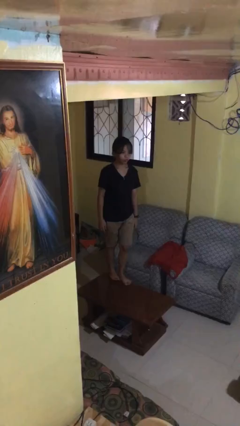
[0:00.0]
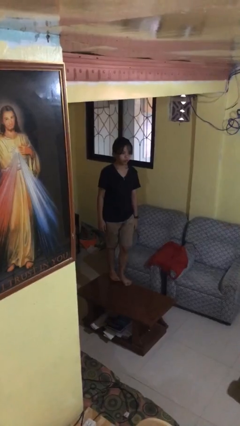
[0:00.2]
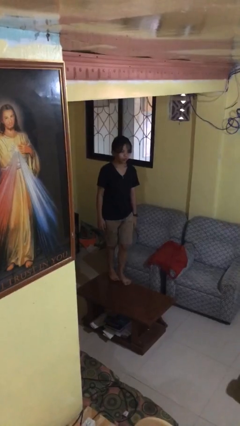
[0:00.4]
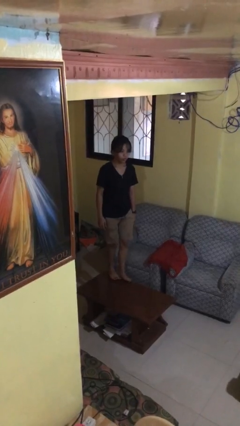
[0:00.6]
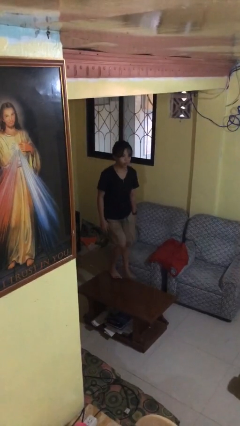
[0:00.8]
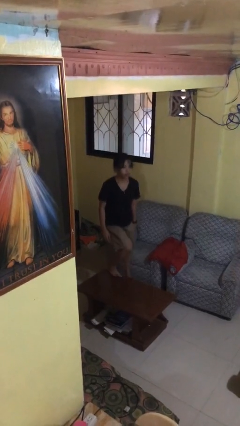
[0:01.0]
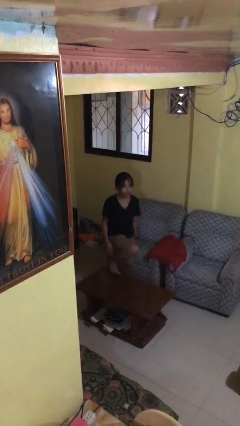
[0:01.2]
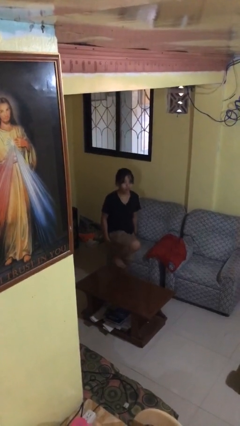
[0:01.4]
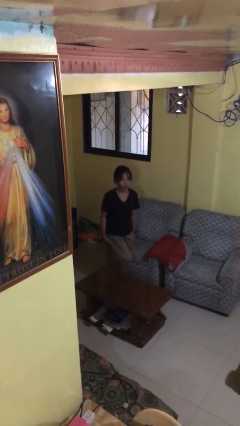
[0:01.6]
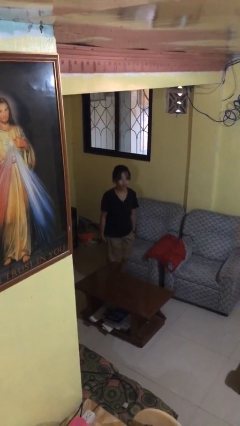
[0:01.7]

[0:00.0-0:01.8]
person climbs off table

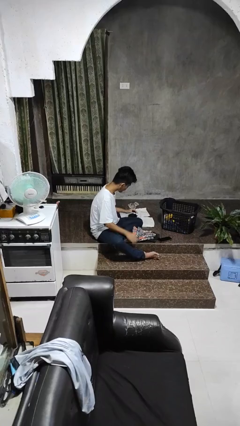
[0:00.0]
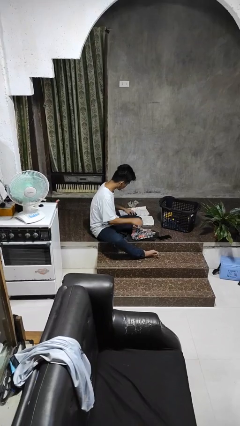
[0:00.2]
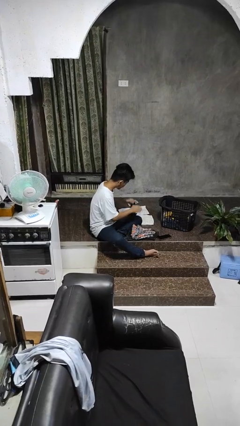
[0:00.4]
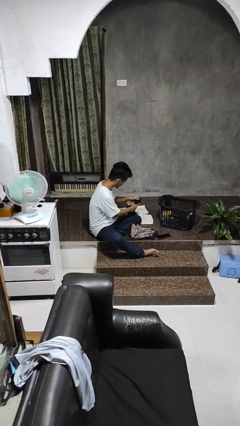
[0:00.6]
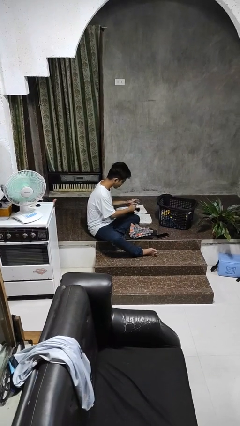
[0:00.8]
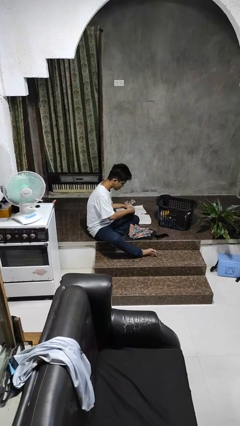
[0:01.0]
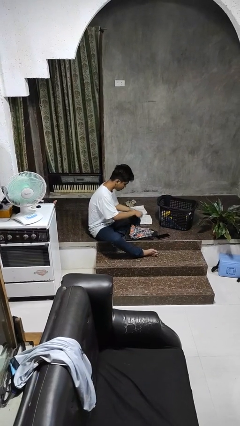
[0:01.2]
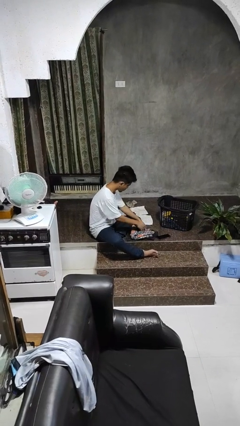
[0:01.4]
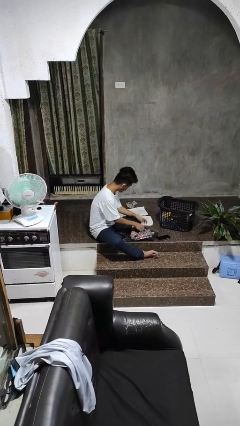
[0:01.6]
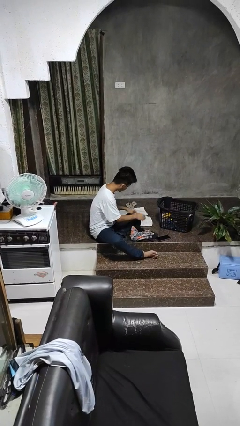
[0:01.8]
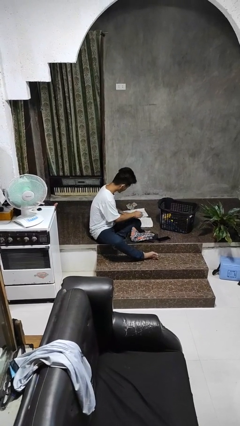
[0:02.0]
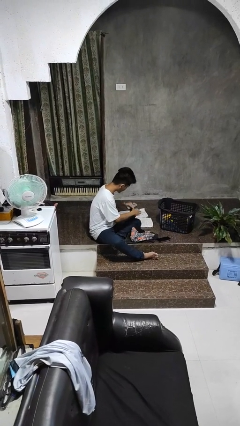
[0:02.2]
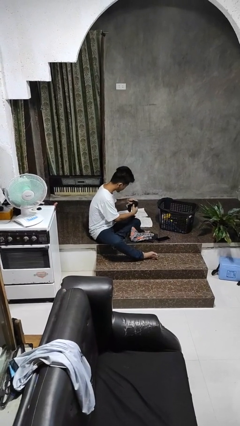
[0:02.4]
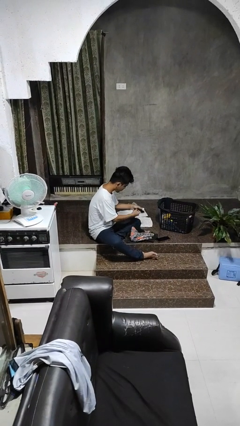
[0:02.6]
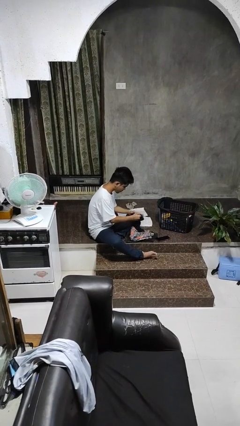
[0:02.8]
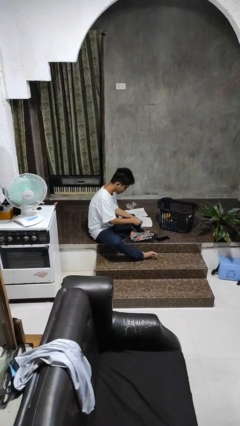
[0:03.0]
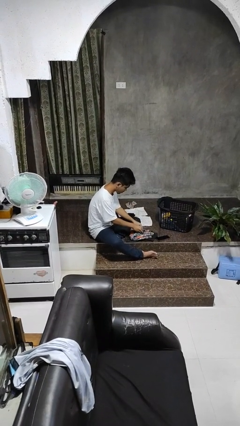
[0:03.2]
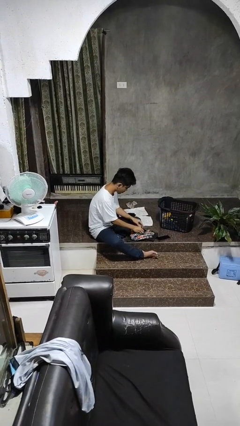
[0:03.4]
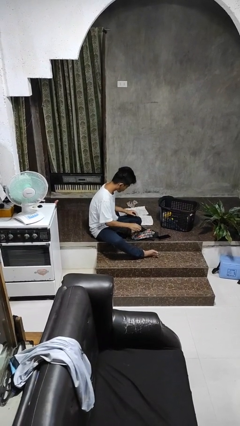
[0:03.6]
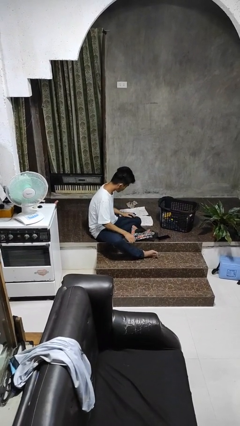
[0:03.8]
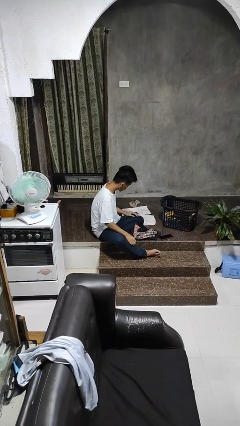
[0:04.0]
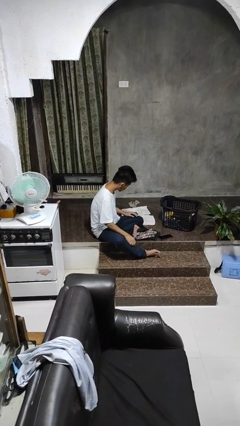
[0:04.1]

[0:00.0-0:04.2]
person folds socks

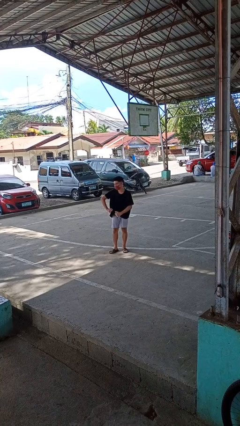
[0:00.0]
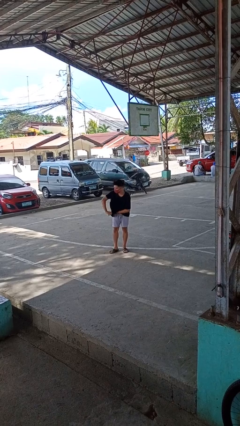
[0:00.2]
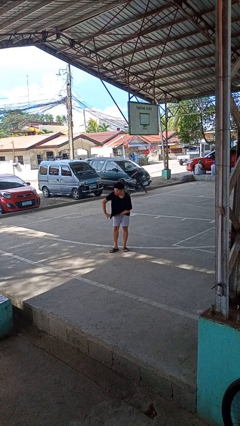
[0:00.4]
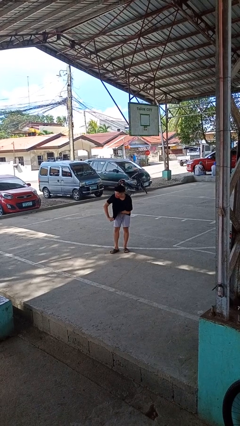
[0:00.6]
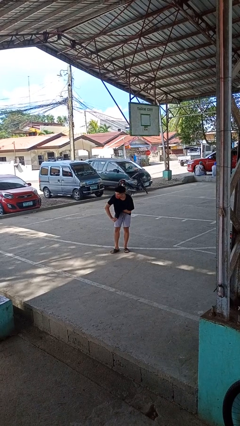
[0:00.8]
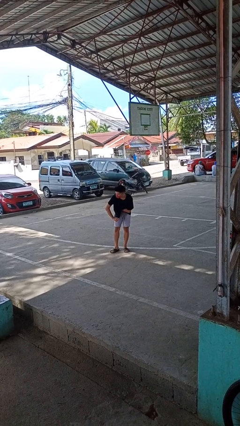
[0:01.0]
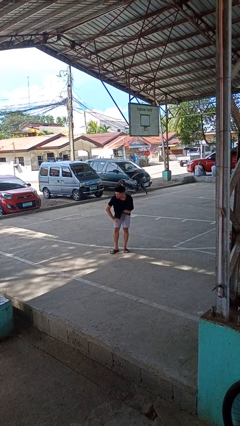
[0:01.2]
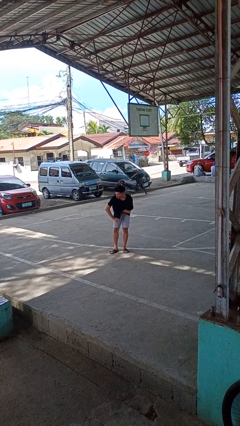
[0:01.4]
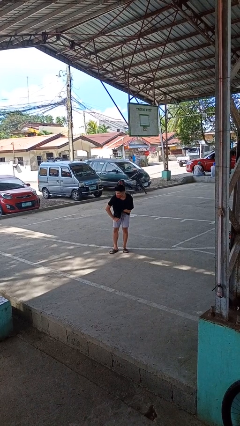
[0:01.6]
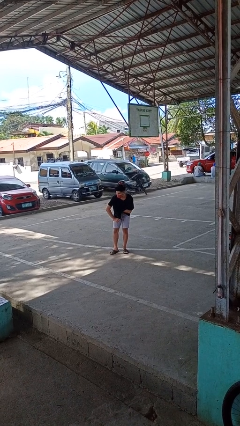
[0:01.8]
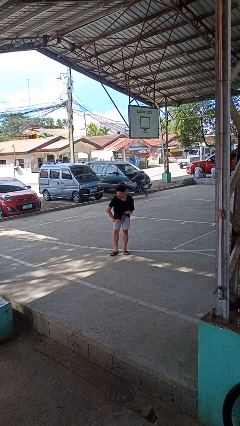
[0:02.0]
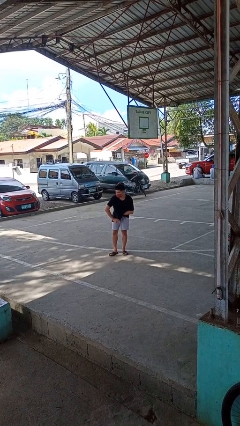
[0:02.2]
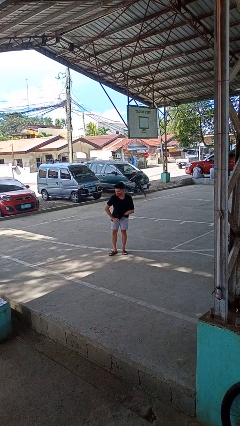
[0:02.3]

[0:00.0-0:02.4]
person applies deodorant

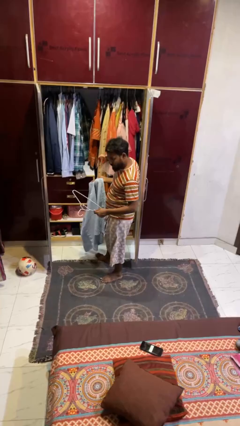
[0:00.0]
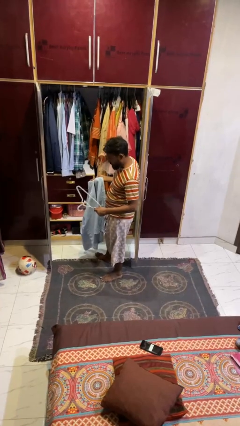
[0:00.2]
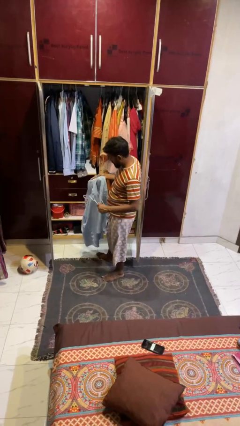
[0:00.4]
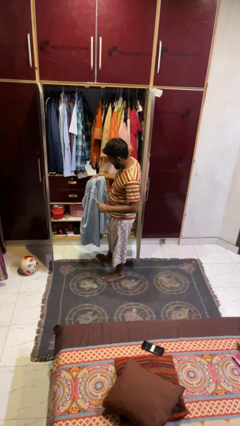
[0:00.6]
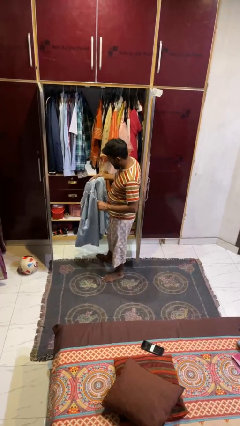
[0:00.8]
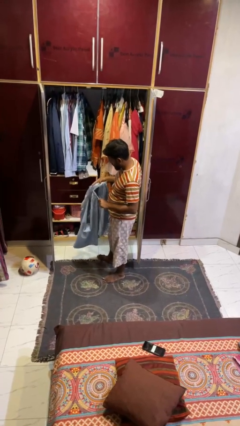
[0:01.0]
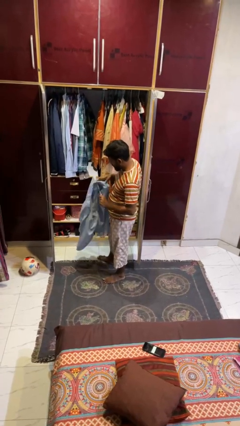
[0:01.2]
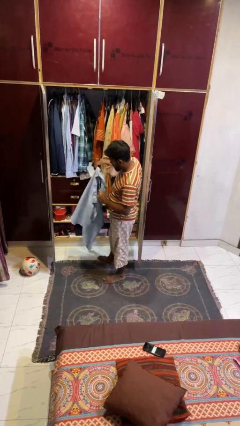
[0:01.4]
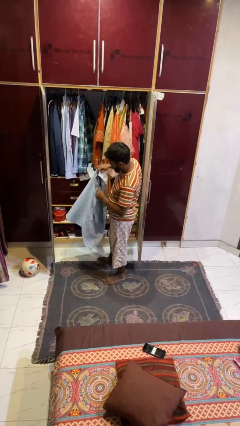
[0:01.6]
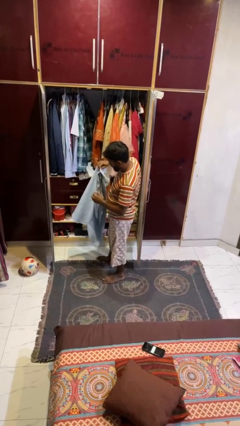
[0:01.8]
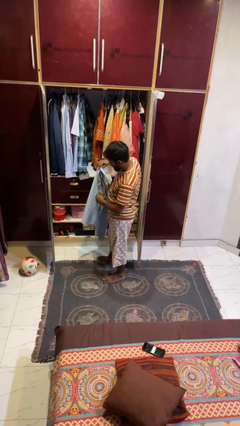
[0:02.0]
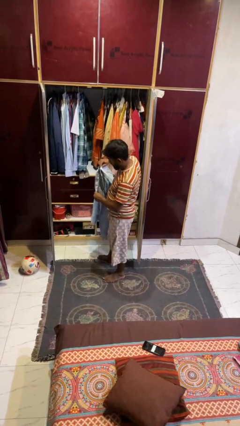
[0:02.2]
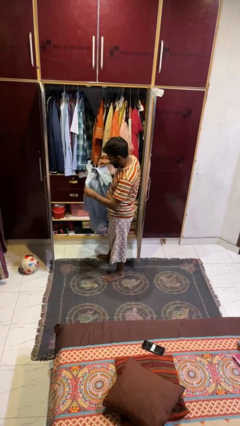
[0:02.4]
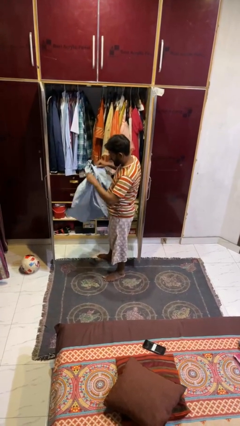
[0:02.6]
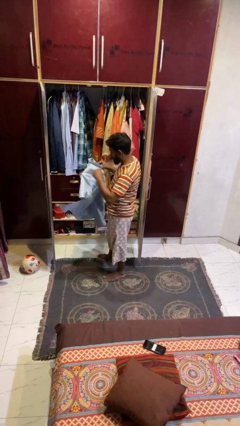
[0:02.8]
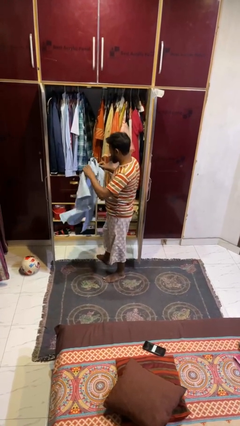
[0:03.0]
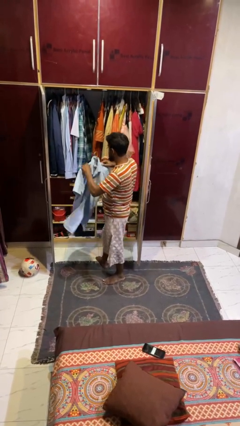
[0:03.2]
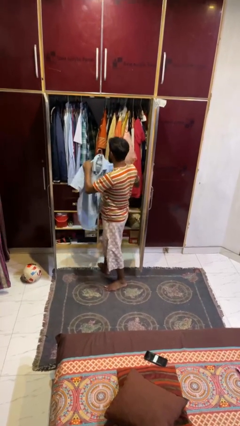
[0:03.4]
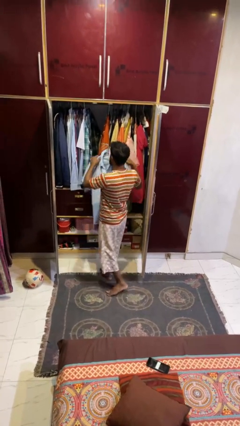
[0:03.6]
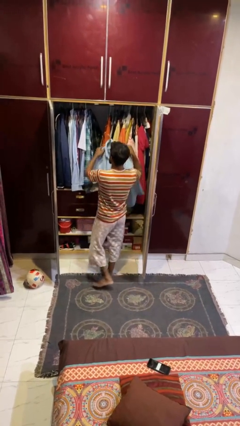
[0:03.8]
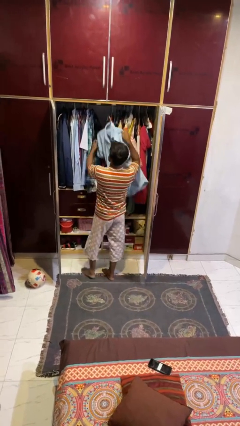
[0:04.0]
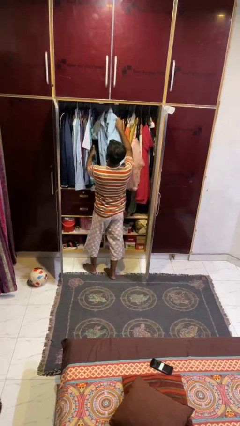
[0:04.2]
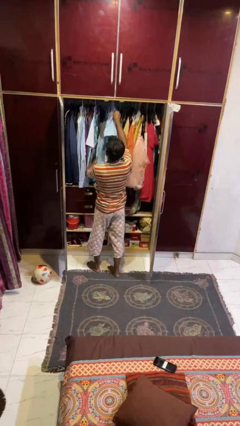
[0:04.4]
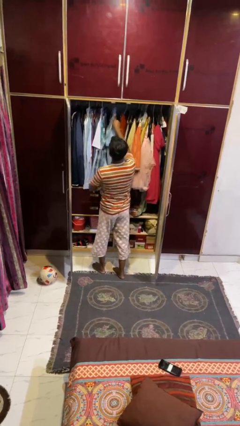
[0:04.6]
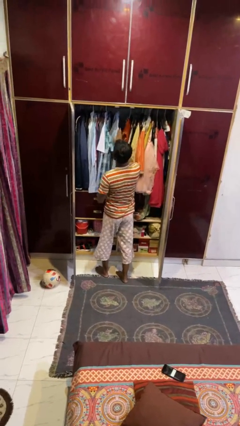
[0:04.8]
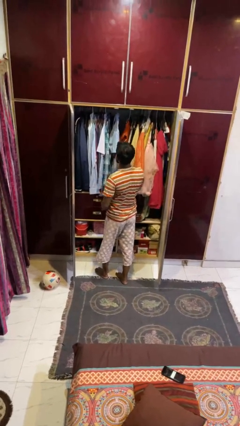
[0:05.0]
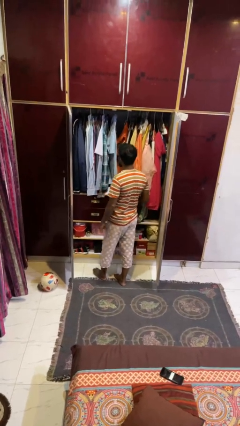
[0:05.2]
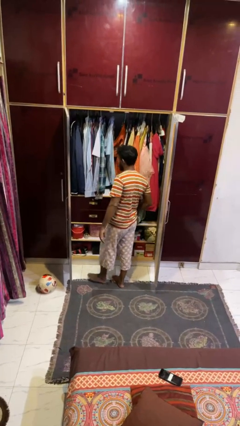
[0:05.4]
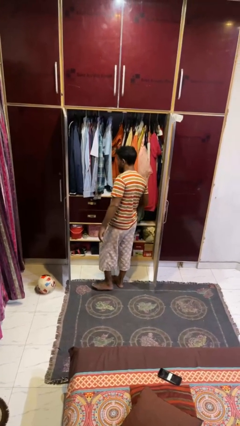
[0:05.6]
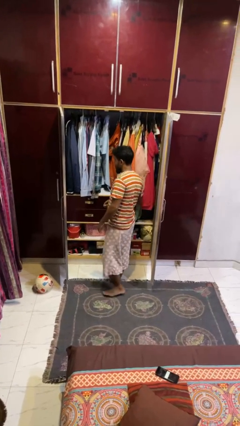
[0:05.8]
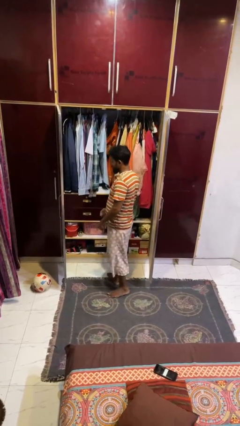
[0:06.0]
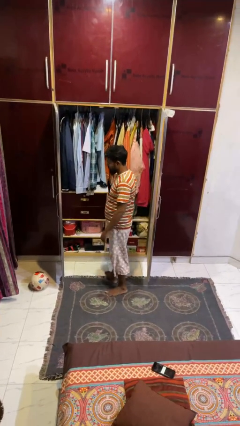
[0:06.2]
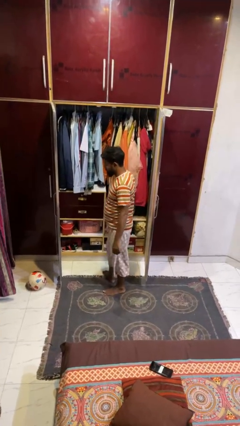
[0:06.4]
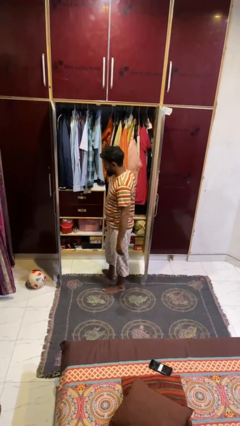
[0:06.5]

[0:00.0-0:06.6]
person puts clothes into closet

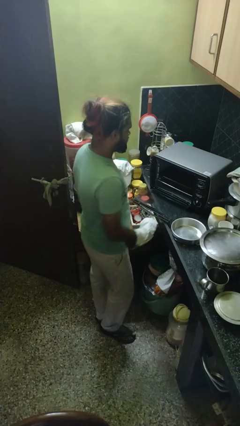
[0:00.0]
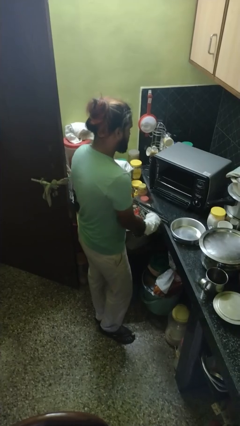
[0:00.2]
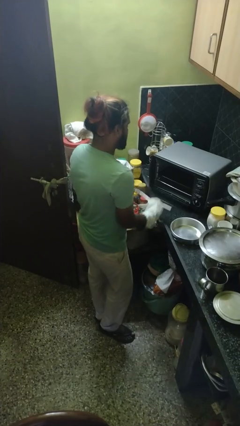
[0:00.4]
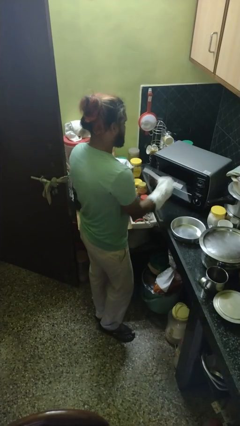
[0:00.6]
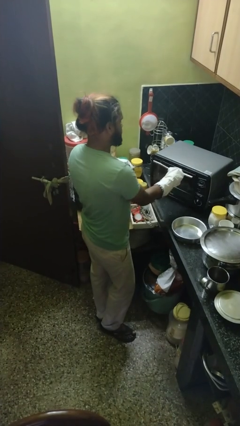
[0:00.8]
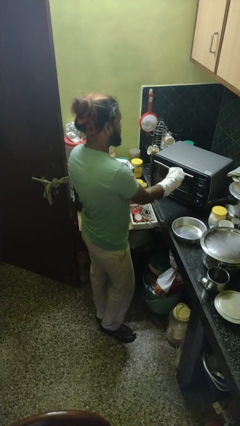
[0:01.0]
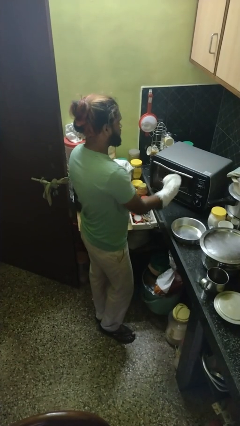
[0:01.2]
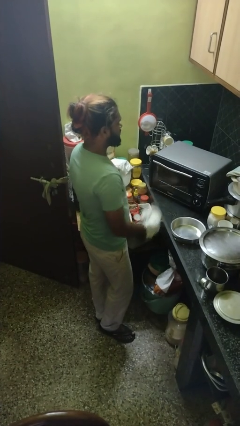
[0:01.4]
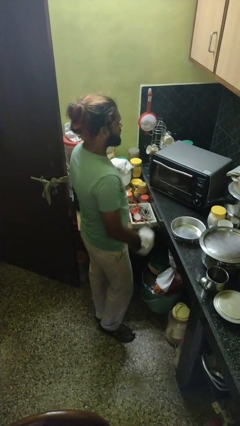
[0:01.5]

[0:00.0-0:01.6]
person closes oven door

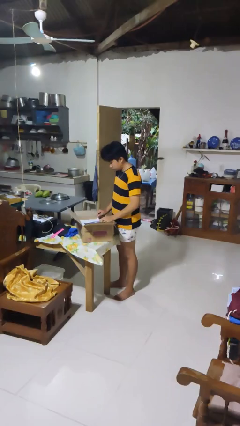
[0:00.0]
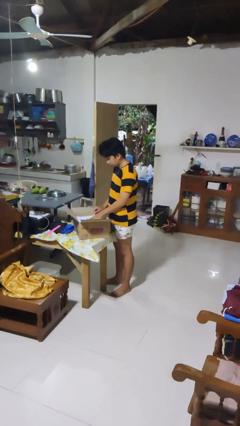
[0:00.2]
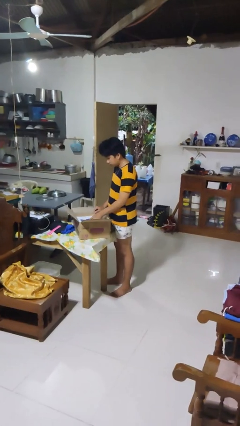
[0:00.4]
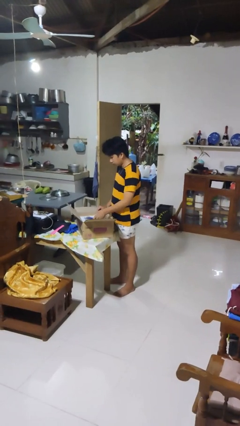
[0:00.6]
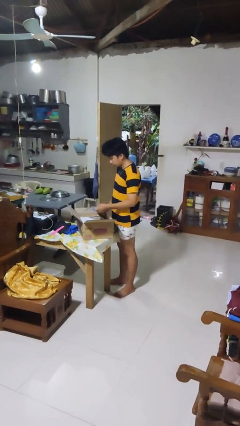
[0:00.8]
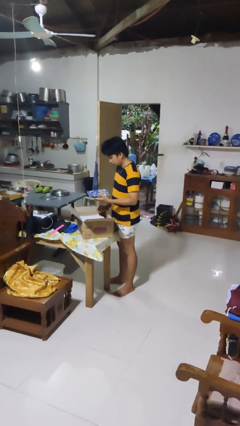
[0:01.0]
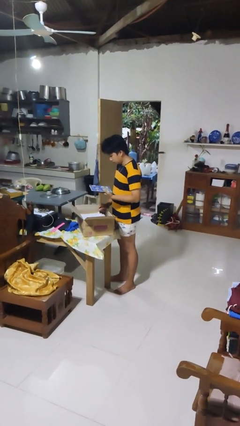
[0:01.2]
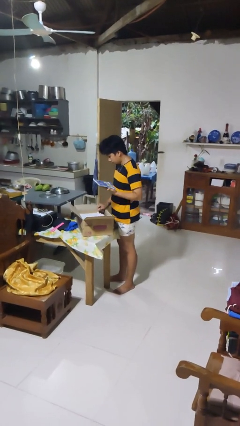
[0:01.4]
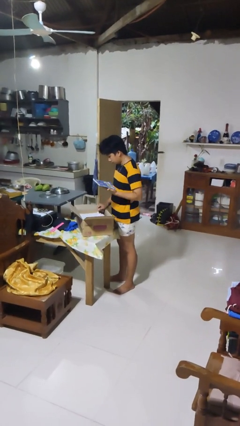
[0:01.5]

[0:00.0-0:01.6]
person takes object from box
